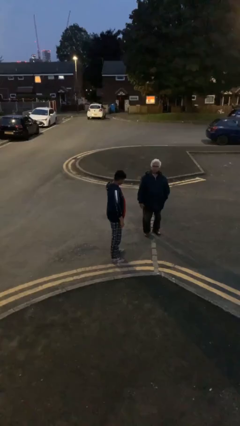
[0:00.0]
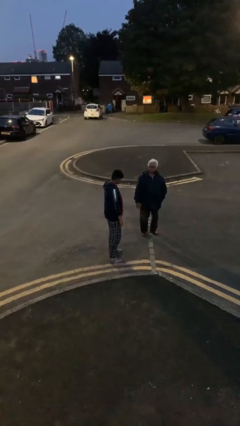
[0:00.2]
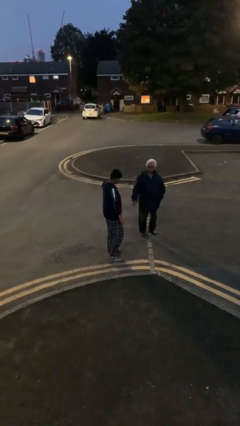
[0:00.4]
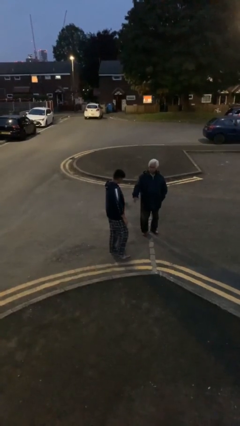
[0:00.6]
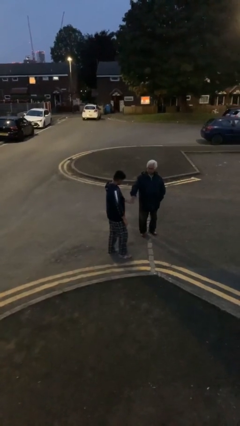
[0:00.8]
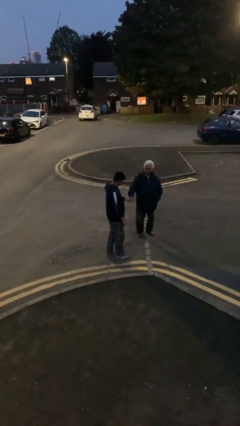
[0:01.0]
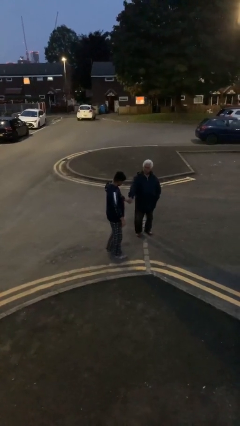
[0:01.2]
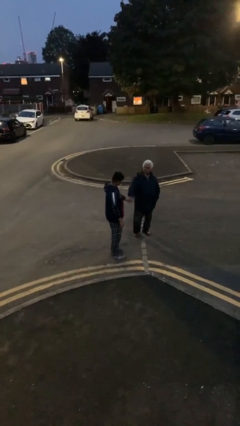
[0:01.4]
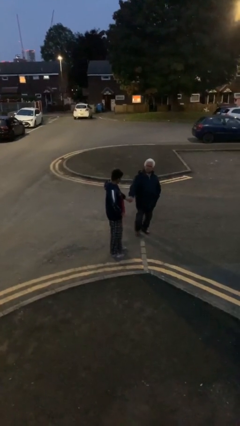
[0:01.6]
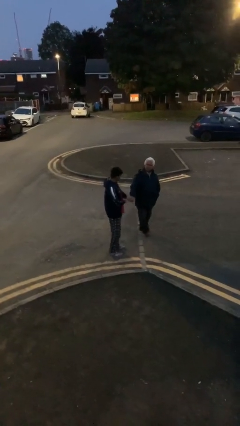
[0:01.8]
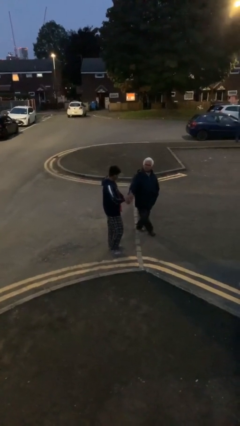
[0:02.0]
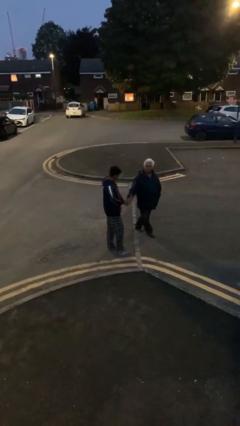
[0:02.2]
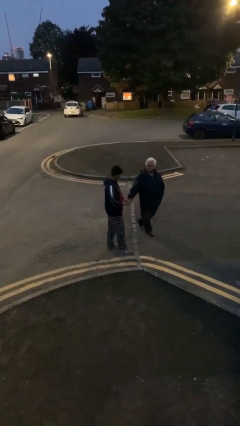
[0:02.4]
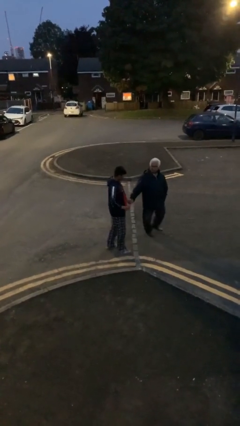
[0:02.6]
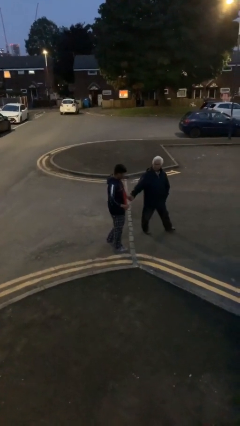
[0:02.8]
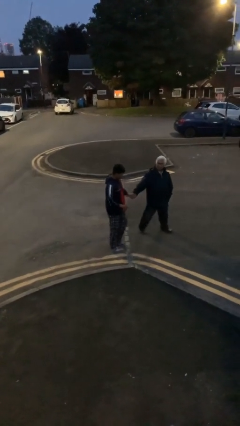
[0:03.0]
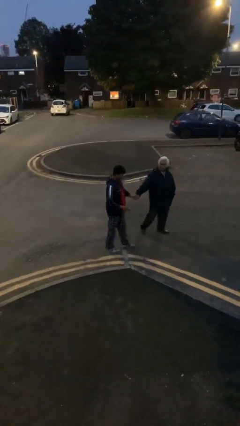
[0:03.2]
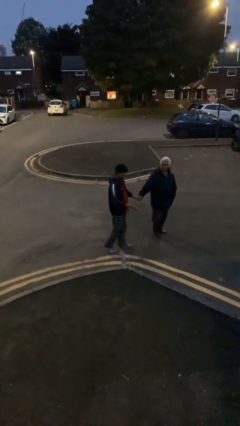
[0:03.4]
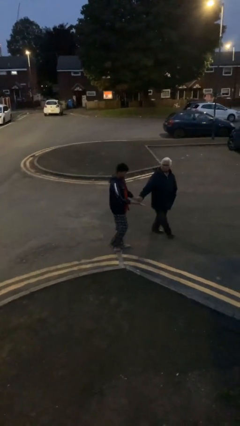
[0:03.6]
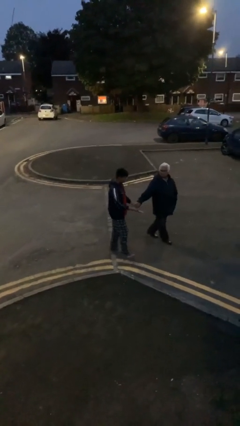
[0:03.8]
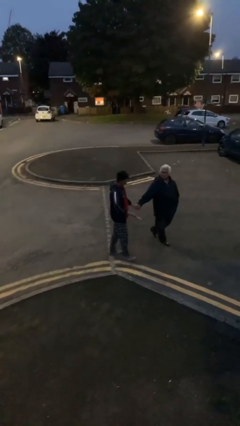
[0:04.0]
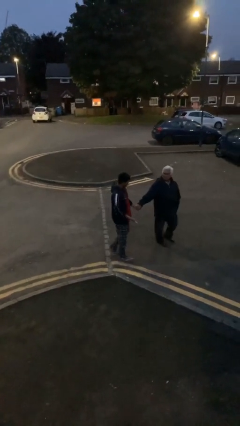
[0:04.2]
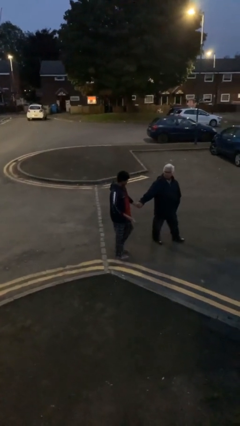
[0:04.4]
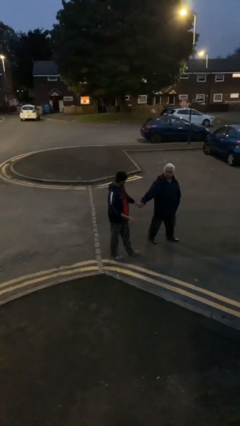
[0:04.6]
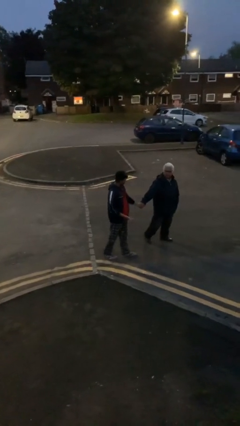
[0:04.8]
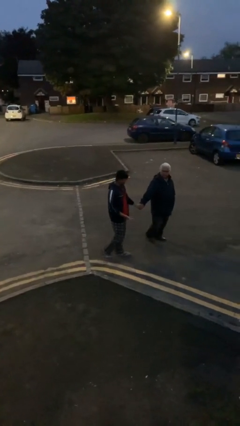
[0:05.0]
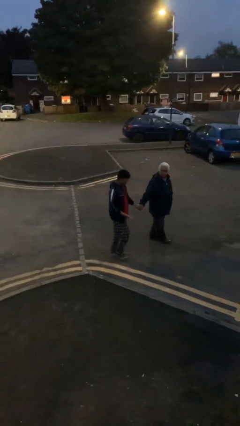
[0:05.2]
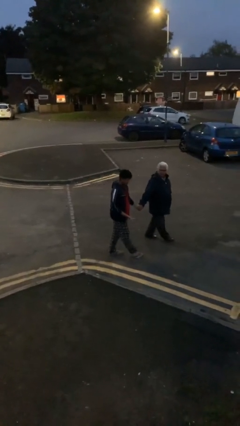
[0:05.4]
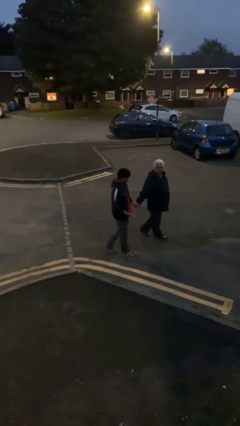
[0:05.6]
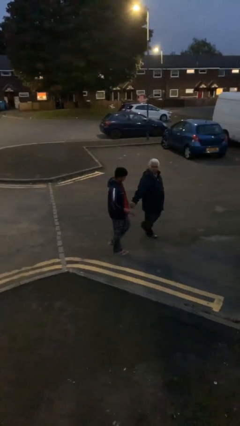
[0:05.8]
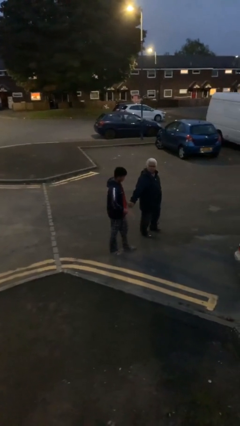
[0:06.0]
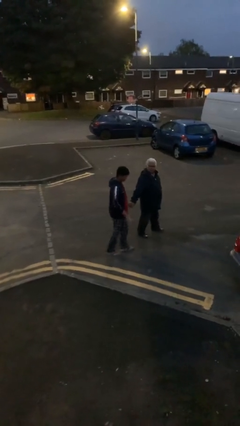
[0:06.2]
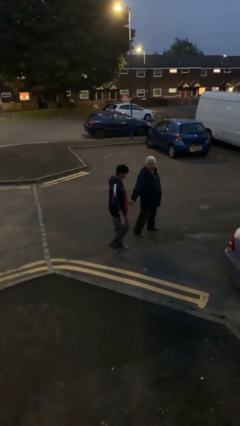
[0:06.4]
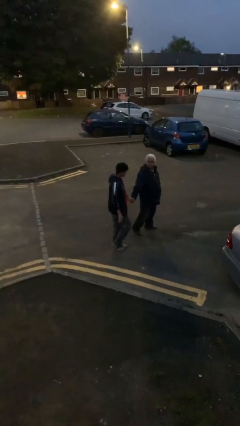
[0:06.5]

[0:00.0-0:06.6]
person holds hand

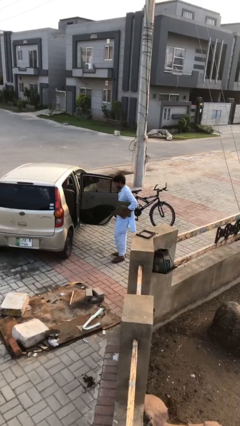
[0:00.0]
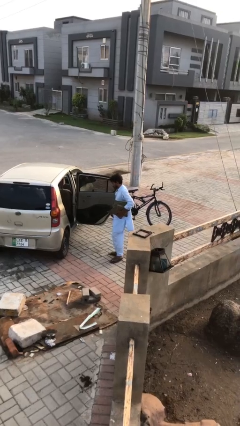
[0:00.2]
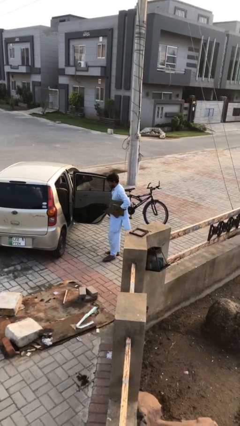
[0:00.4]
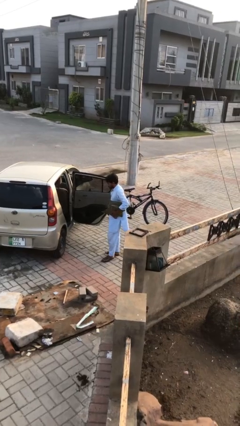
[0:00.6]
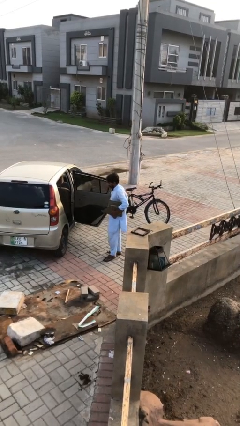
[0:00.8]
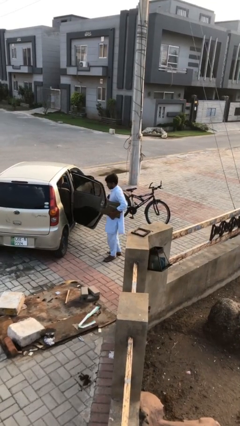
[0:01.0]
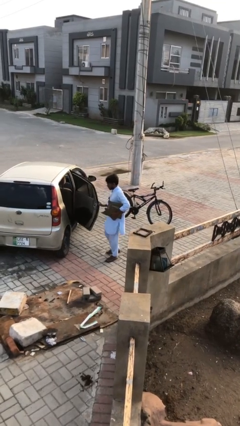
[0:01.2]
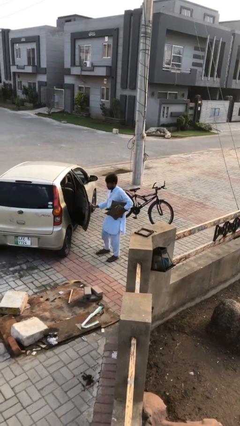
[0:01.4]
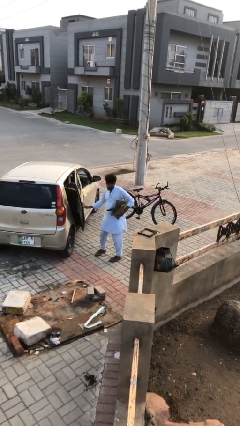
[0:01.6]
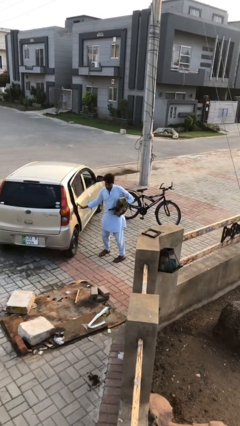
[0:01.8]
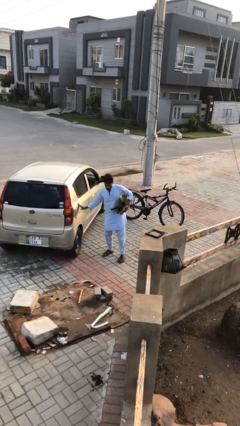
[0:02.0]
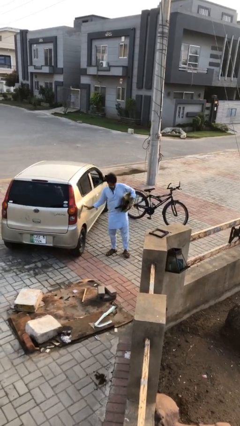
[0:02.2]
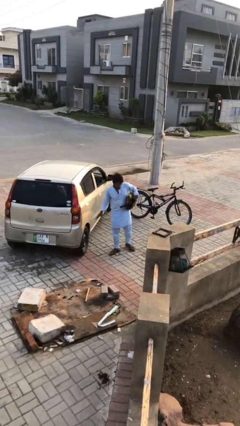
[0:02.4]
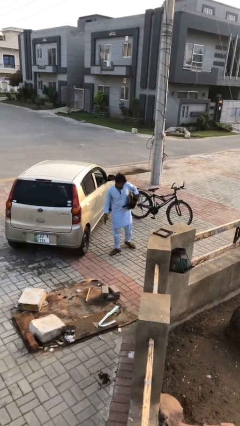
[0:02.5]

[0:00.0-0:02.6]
person closes car door

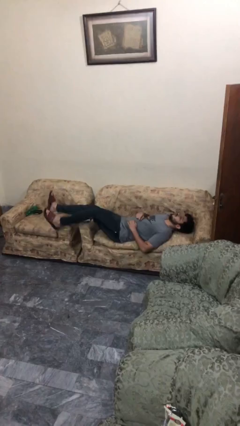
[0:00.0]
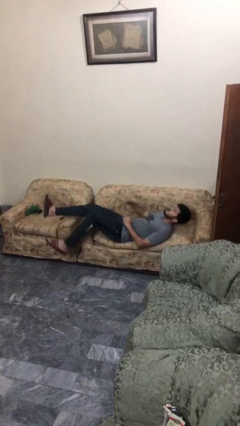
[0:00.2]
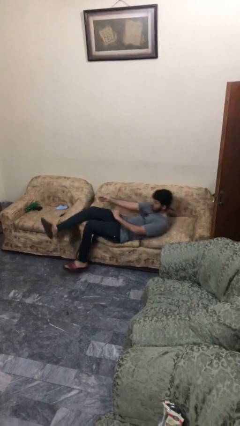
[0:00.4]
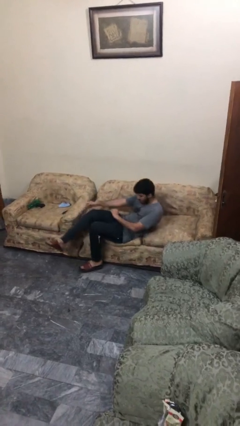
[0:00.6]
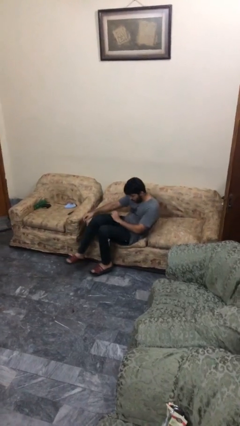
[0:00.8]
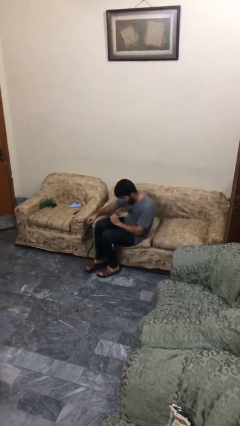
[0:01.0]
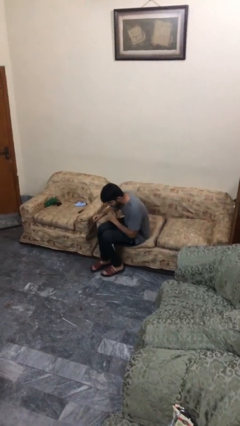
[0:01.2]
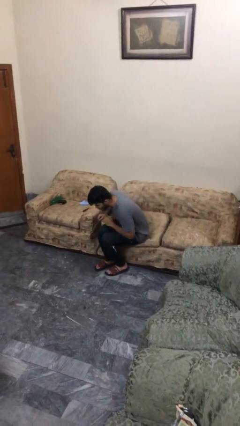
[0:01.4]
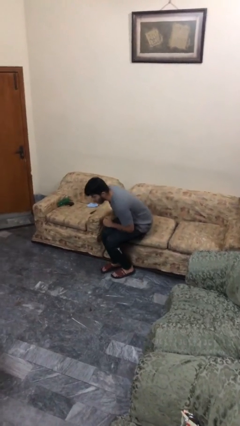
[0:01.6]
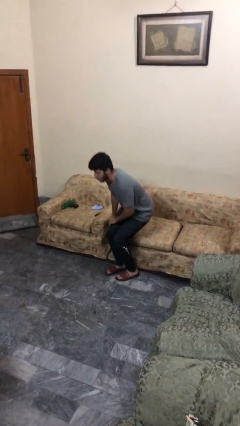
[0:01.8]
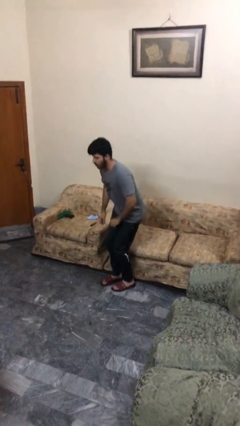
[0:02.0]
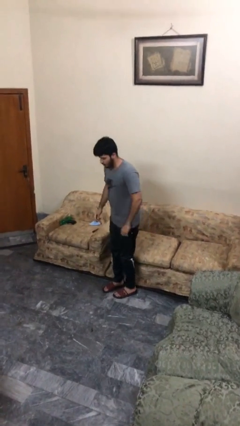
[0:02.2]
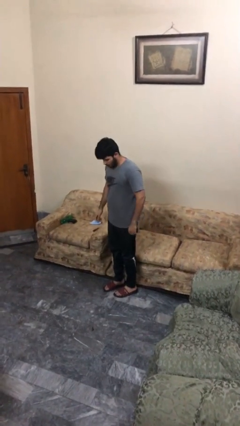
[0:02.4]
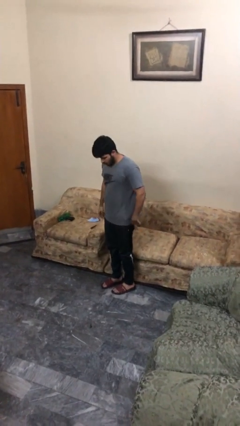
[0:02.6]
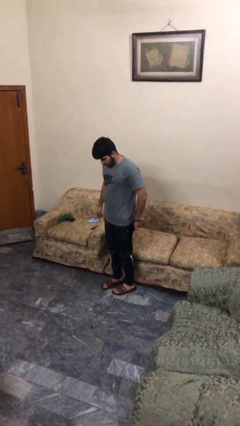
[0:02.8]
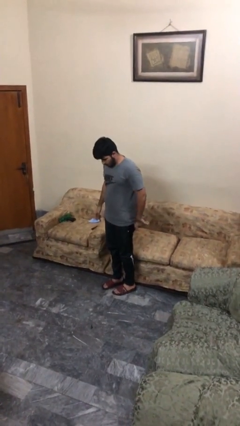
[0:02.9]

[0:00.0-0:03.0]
person stands up

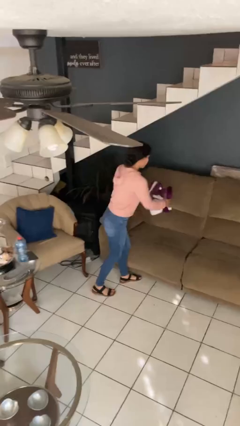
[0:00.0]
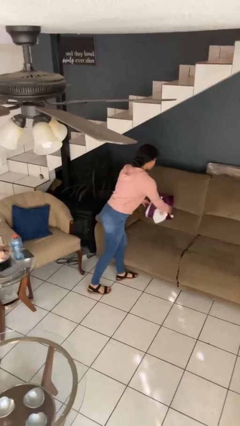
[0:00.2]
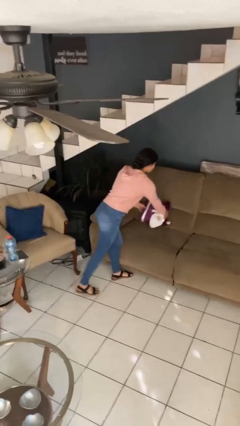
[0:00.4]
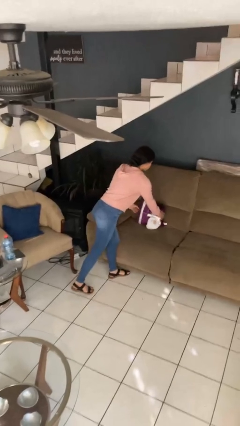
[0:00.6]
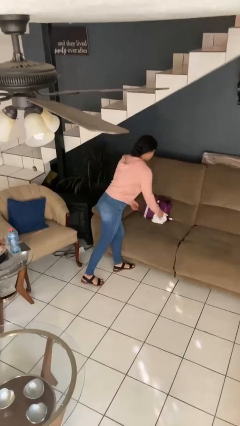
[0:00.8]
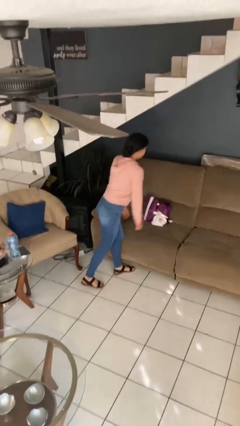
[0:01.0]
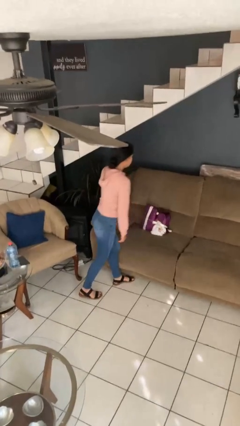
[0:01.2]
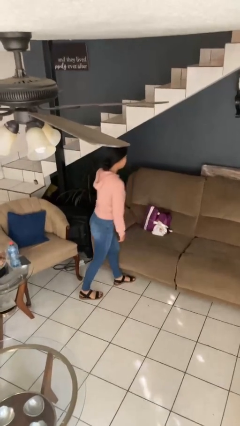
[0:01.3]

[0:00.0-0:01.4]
person puts down object on couch

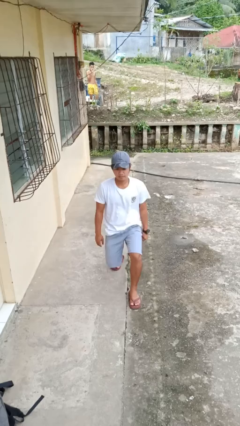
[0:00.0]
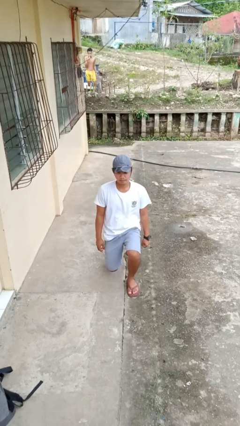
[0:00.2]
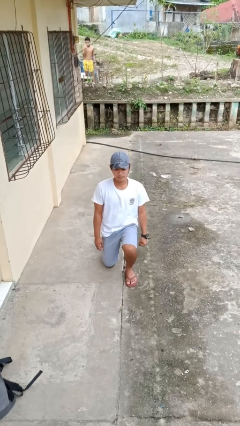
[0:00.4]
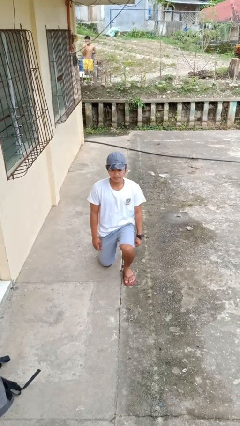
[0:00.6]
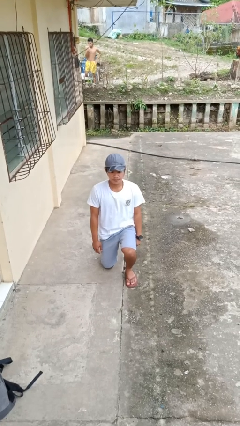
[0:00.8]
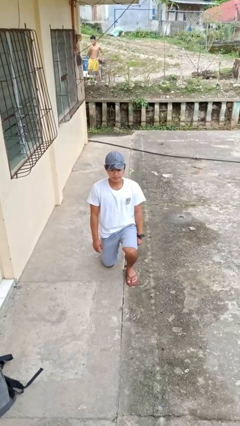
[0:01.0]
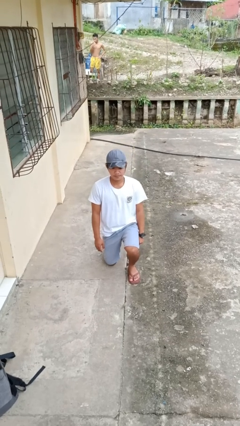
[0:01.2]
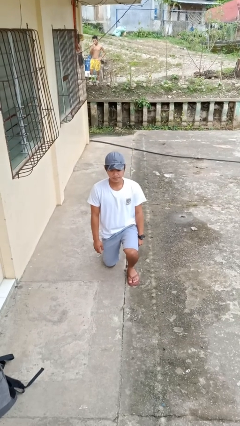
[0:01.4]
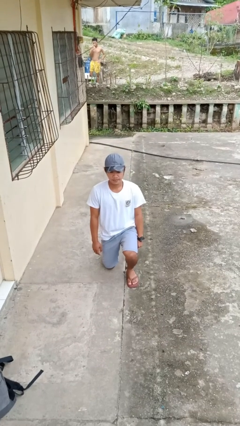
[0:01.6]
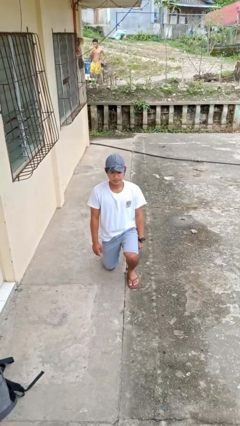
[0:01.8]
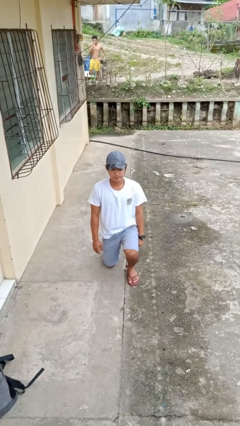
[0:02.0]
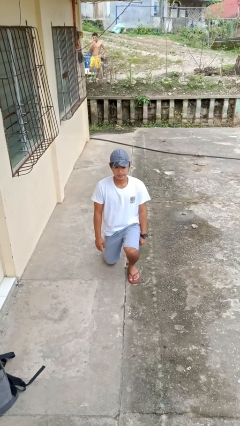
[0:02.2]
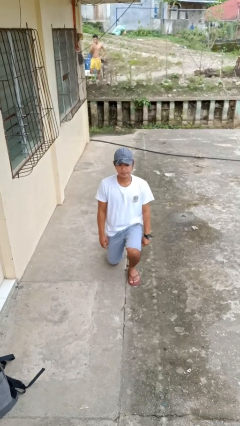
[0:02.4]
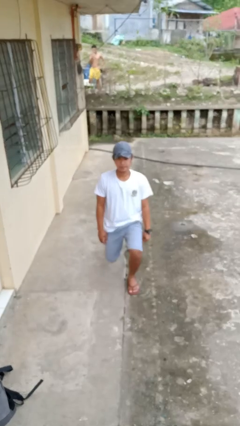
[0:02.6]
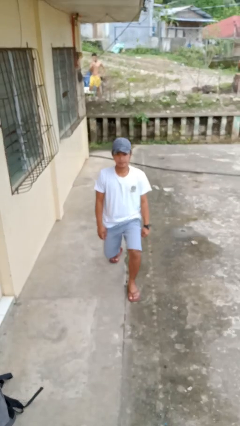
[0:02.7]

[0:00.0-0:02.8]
person kneels

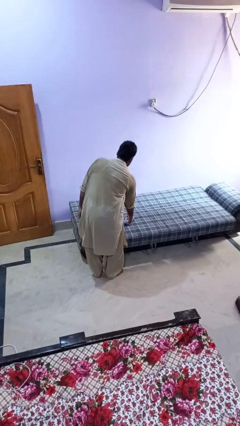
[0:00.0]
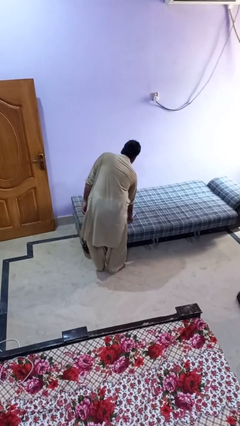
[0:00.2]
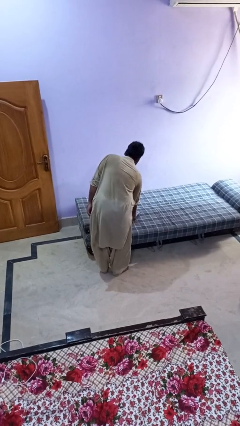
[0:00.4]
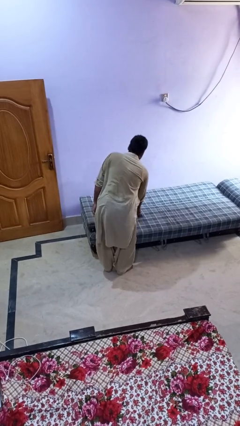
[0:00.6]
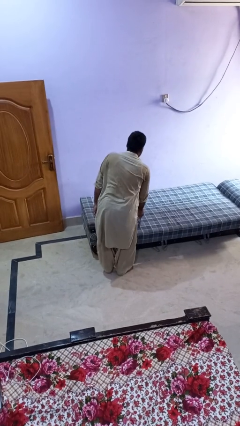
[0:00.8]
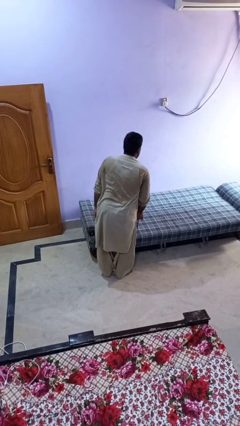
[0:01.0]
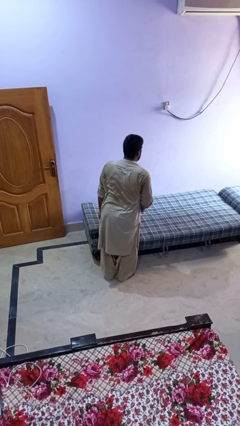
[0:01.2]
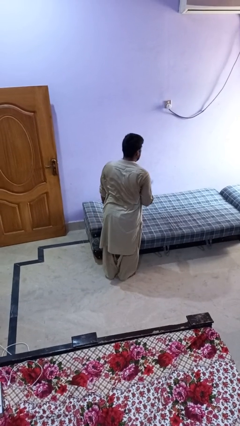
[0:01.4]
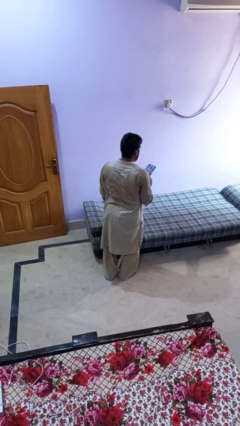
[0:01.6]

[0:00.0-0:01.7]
person picks up object from bed
